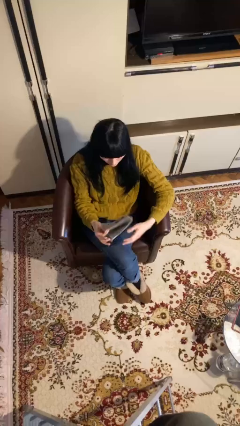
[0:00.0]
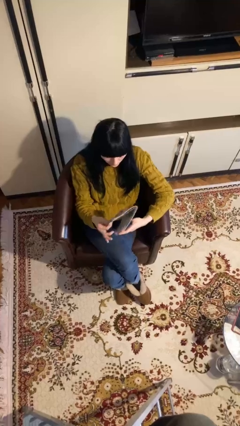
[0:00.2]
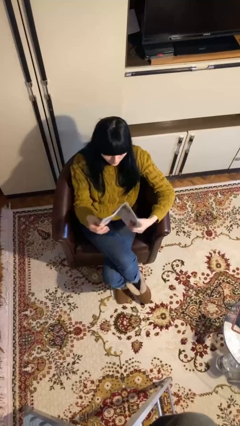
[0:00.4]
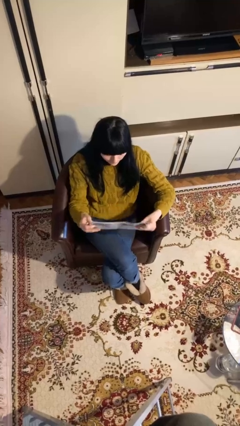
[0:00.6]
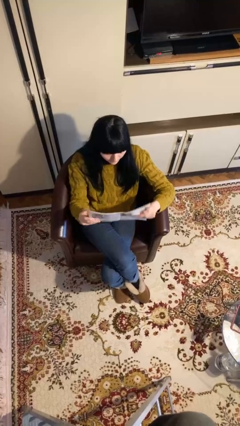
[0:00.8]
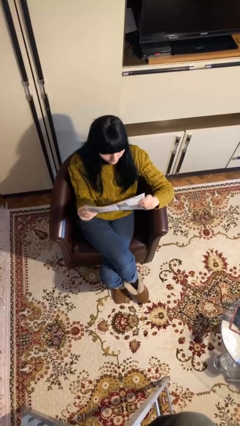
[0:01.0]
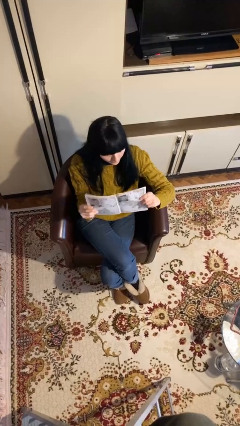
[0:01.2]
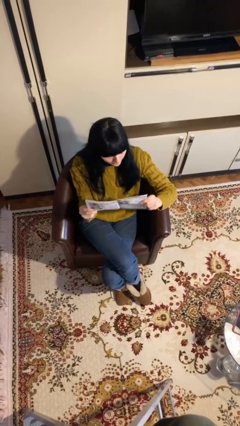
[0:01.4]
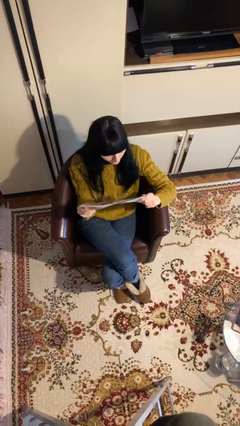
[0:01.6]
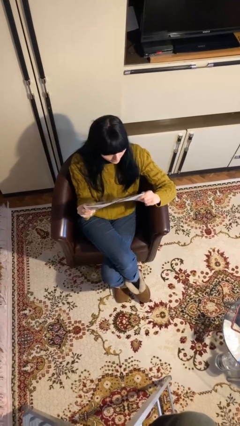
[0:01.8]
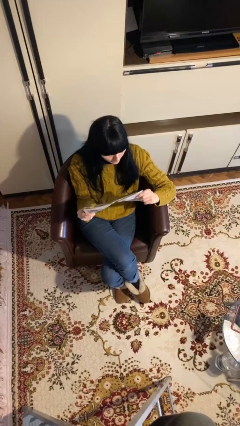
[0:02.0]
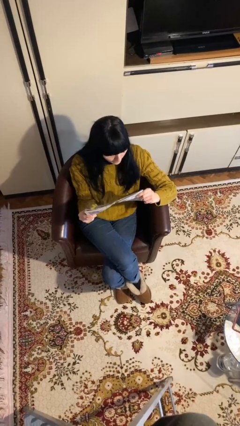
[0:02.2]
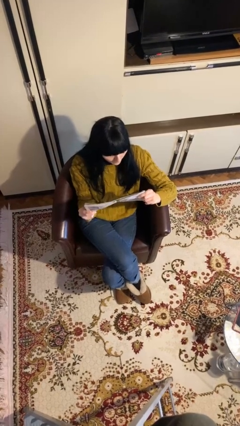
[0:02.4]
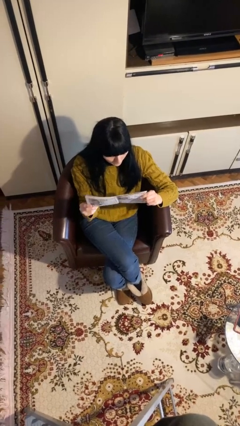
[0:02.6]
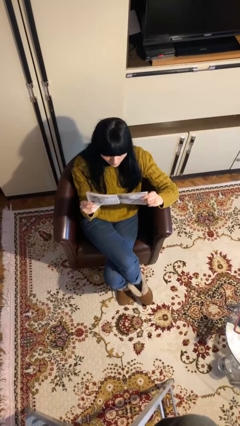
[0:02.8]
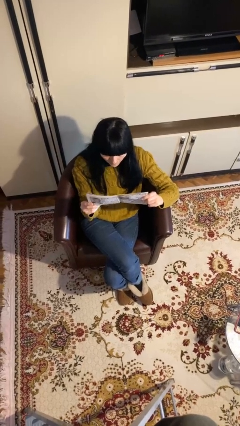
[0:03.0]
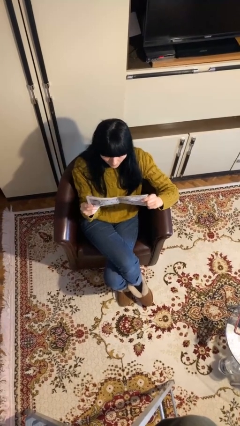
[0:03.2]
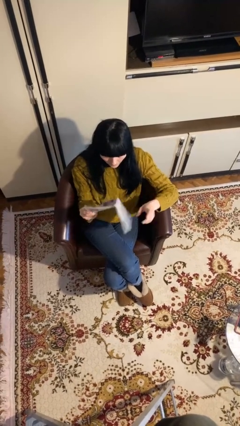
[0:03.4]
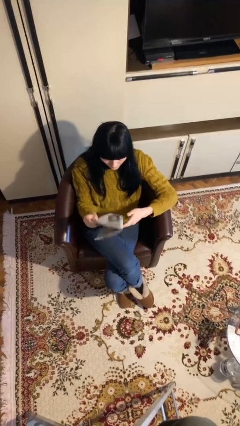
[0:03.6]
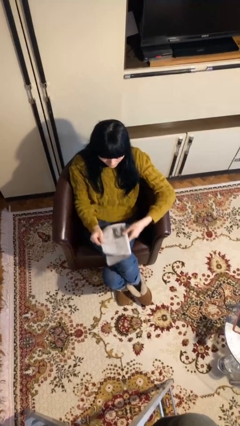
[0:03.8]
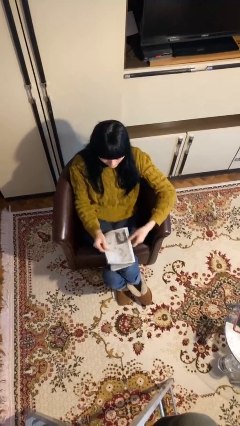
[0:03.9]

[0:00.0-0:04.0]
person reads document

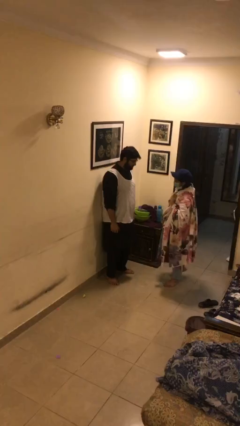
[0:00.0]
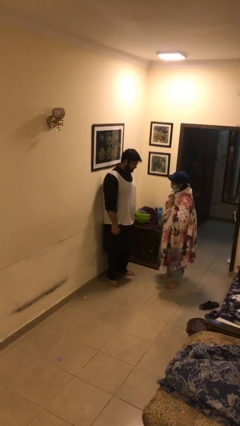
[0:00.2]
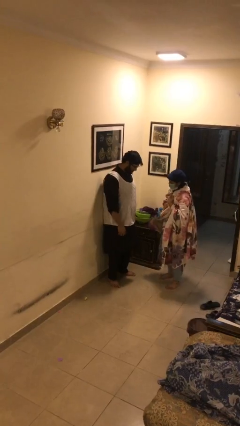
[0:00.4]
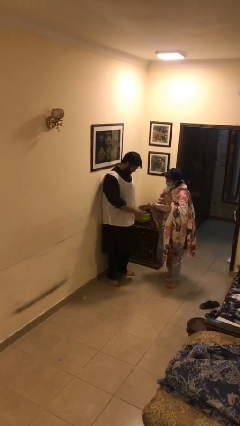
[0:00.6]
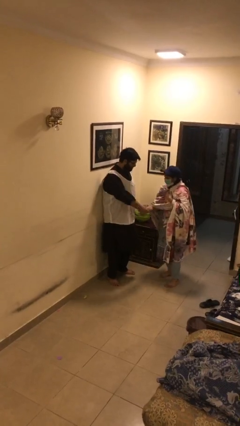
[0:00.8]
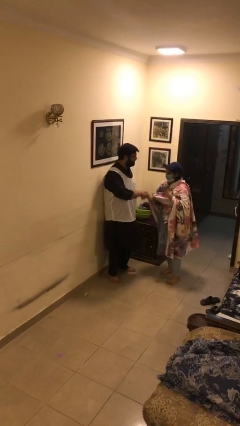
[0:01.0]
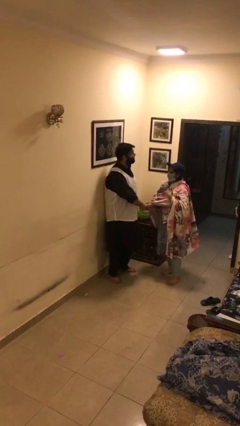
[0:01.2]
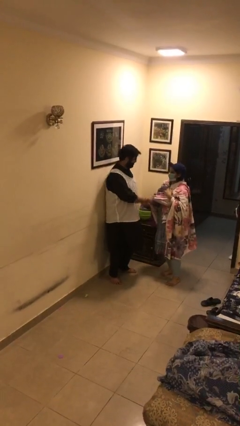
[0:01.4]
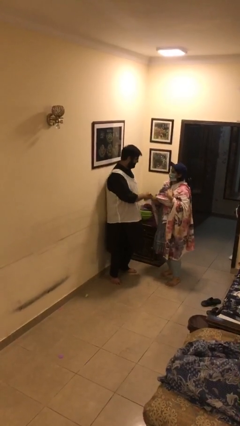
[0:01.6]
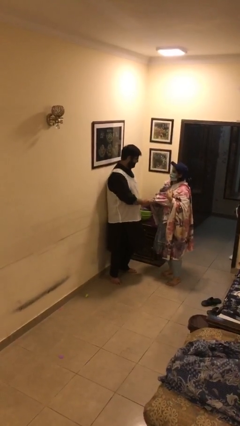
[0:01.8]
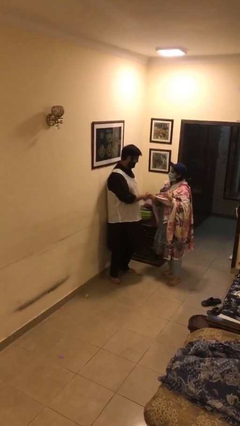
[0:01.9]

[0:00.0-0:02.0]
person shakes hand

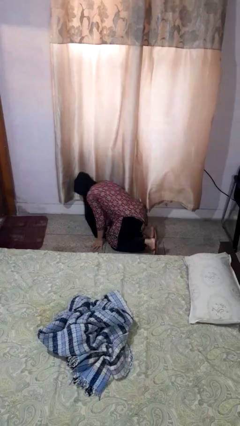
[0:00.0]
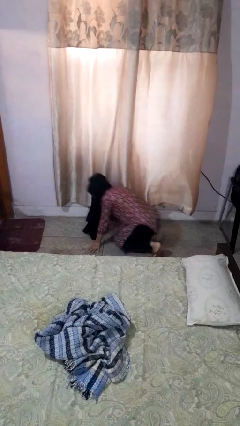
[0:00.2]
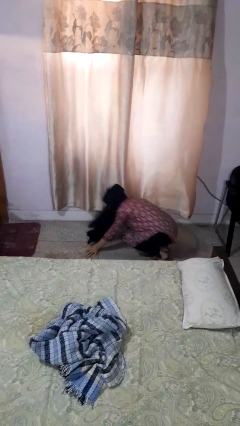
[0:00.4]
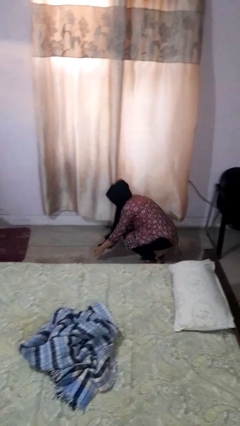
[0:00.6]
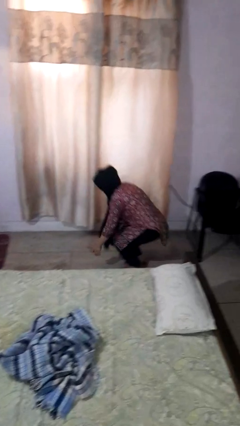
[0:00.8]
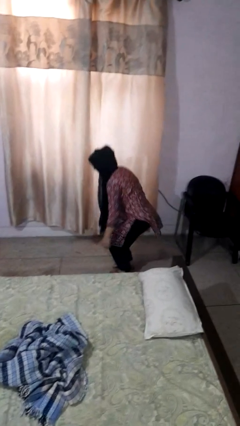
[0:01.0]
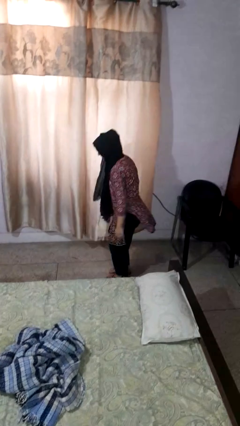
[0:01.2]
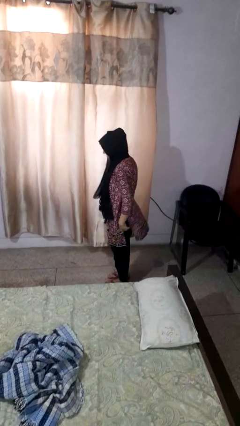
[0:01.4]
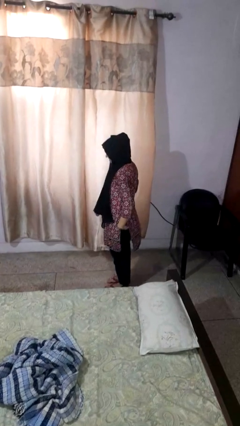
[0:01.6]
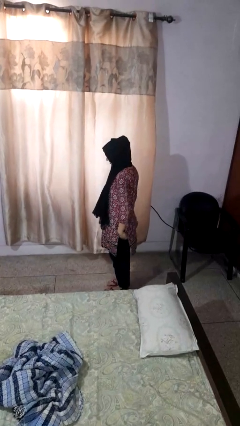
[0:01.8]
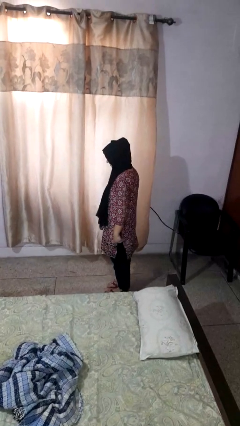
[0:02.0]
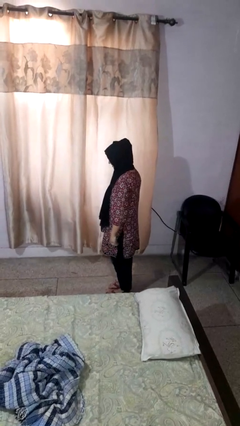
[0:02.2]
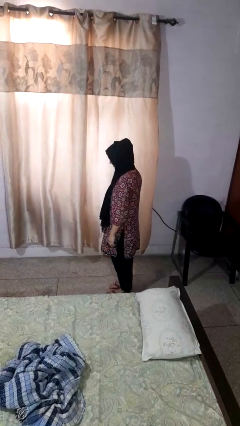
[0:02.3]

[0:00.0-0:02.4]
person stands up from floor

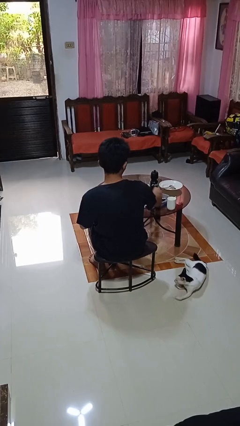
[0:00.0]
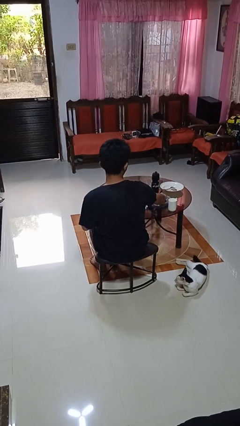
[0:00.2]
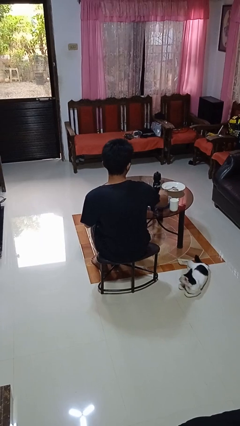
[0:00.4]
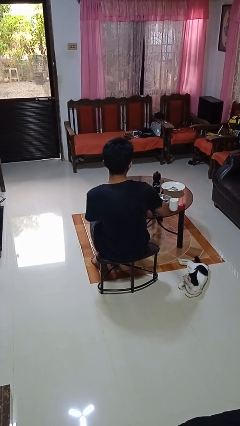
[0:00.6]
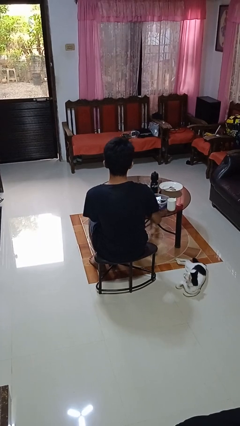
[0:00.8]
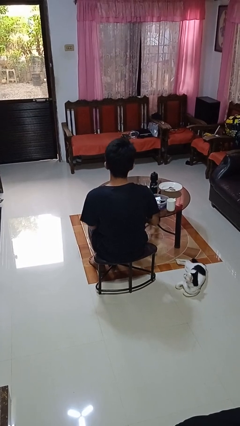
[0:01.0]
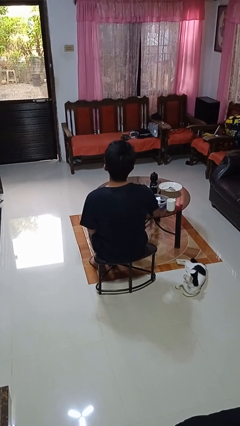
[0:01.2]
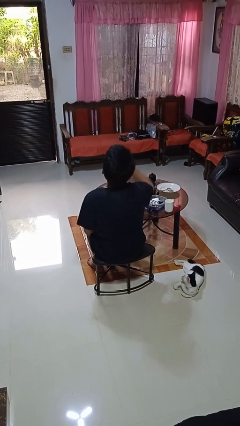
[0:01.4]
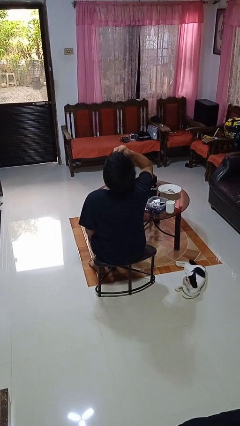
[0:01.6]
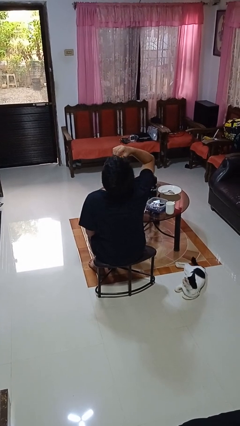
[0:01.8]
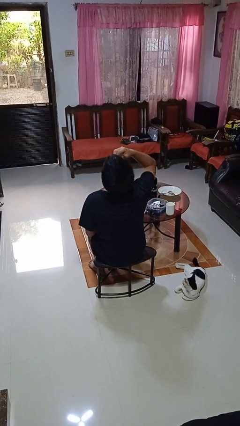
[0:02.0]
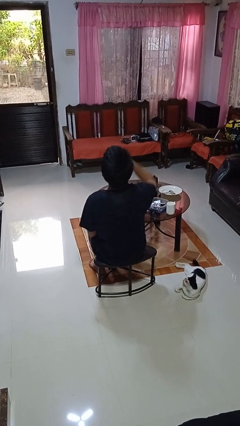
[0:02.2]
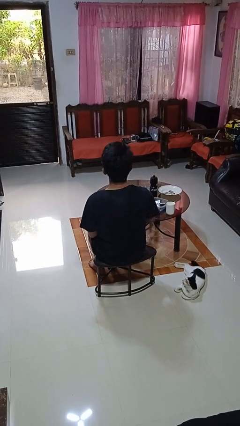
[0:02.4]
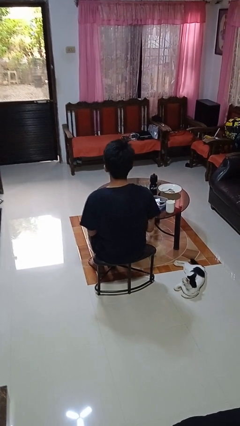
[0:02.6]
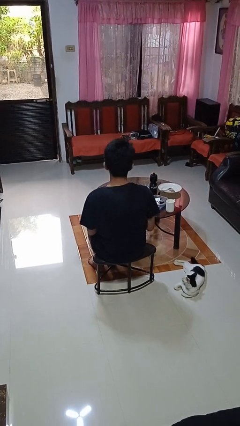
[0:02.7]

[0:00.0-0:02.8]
person takes medicine pills

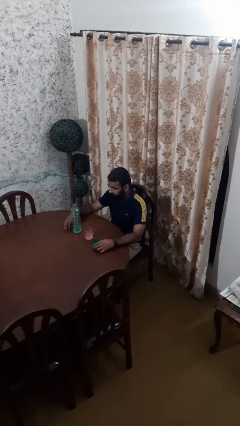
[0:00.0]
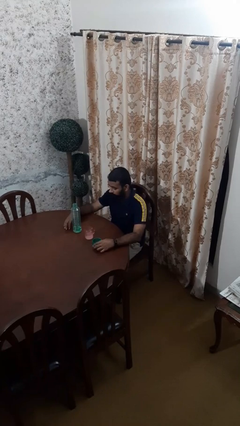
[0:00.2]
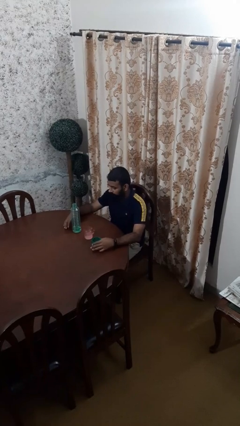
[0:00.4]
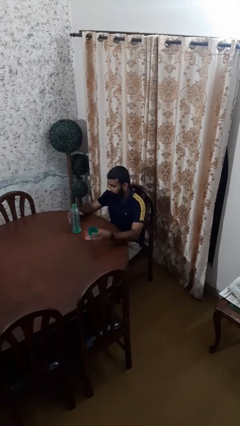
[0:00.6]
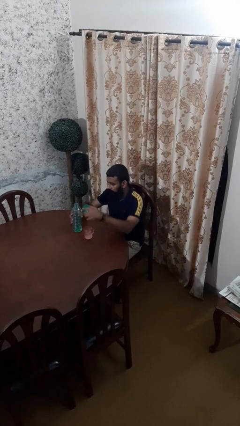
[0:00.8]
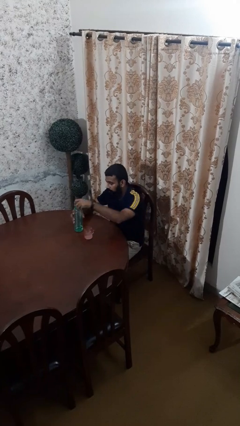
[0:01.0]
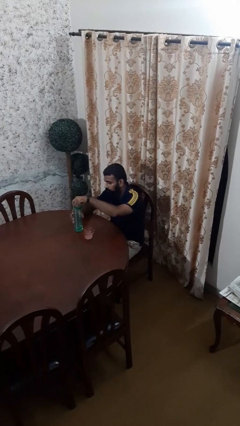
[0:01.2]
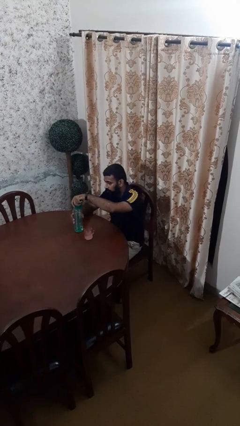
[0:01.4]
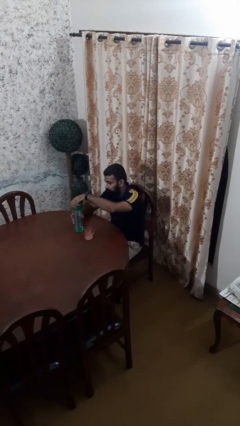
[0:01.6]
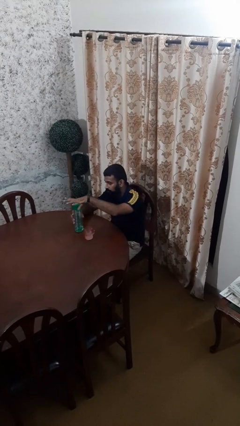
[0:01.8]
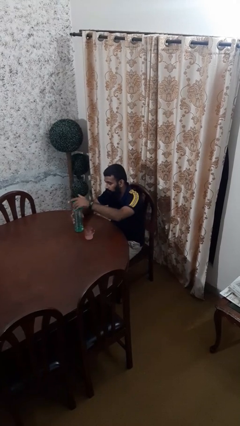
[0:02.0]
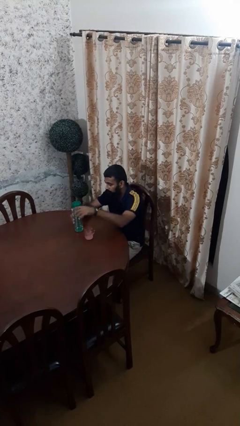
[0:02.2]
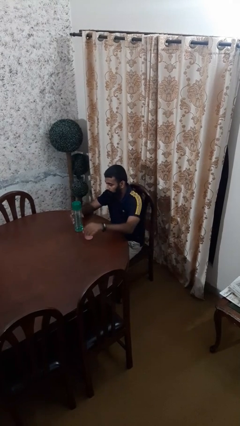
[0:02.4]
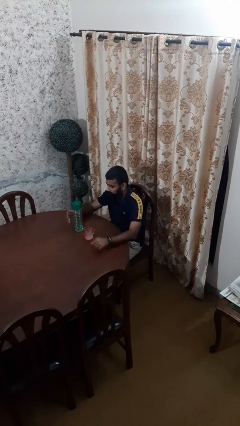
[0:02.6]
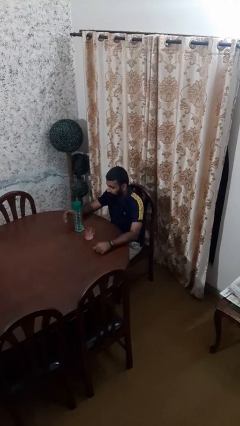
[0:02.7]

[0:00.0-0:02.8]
person screws lid to bottle

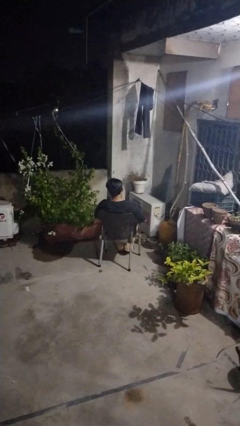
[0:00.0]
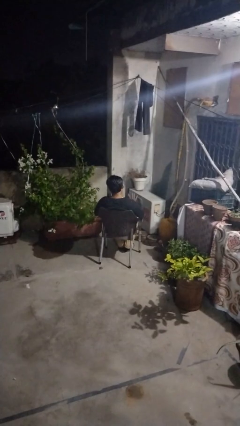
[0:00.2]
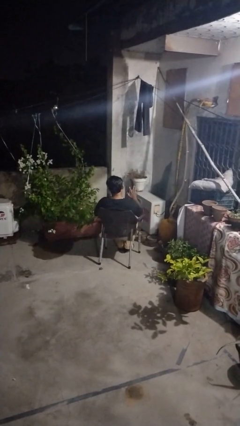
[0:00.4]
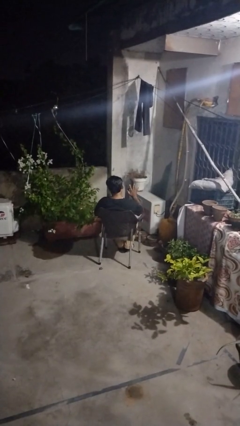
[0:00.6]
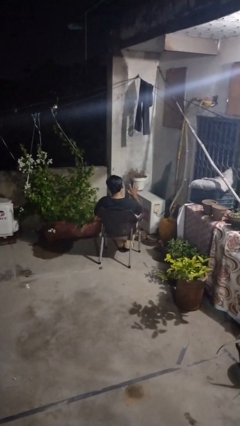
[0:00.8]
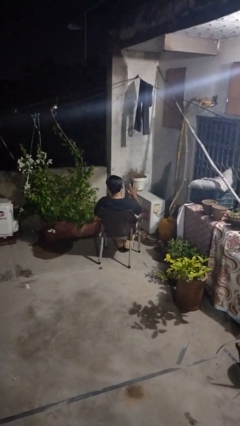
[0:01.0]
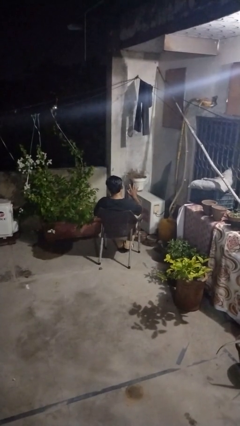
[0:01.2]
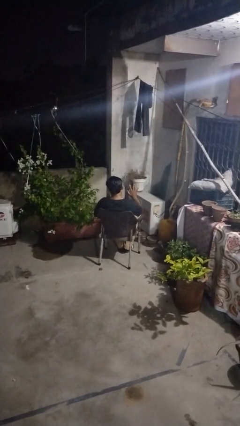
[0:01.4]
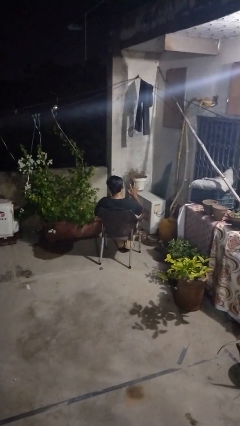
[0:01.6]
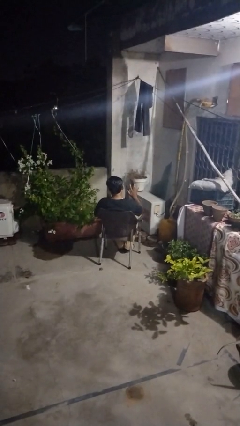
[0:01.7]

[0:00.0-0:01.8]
person gestures number five

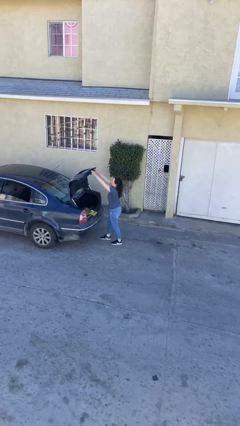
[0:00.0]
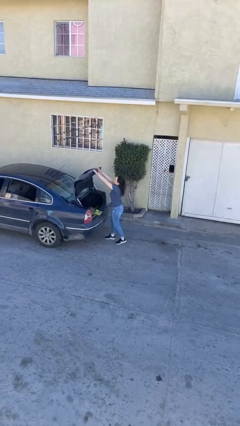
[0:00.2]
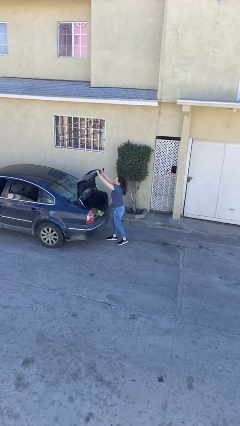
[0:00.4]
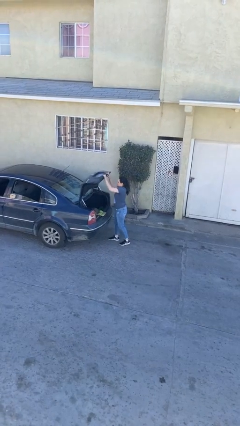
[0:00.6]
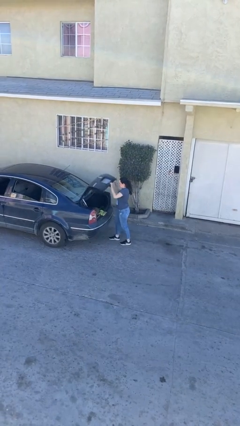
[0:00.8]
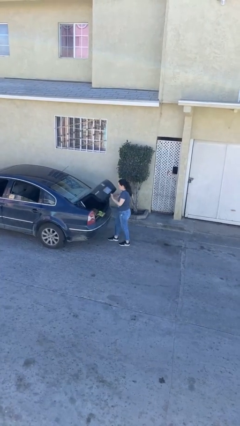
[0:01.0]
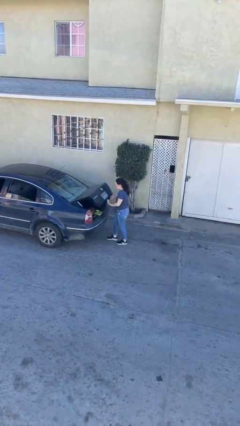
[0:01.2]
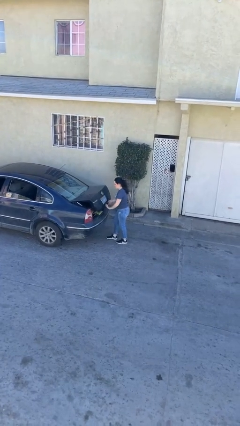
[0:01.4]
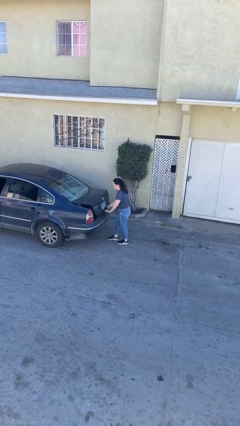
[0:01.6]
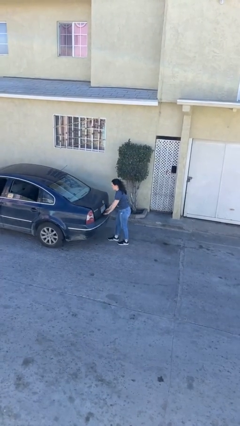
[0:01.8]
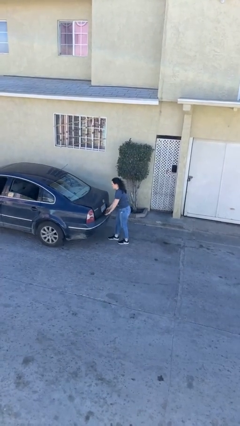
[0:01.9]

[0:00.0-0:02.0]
person closes car trunk
